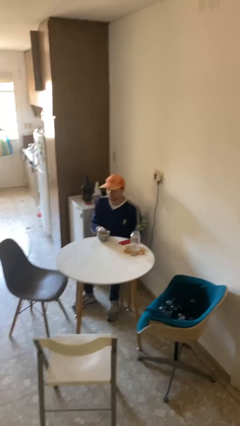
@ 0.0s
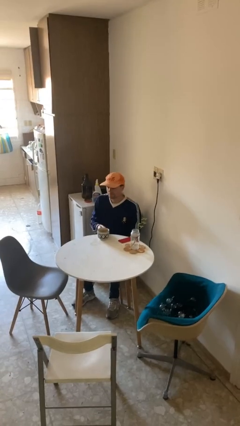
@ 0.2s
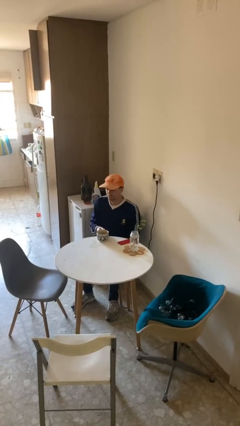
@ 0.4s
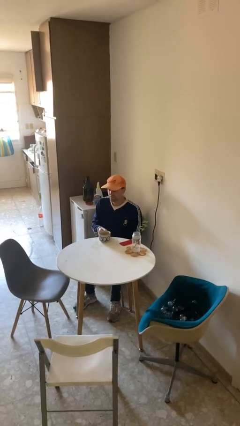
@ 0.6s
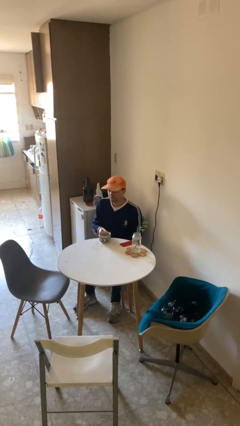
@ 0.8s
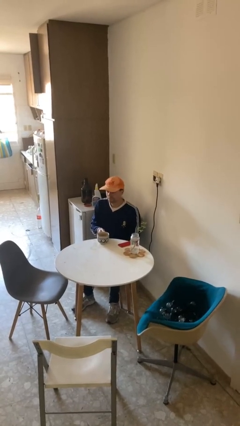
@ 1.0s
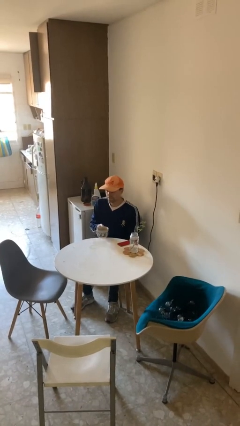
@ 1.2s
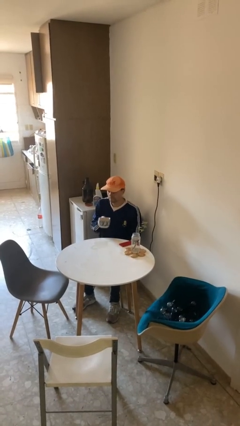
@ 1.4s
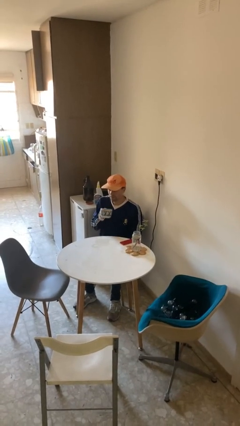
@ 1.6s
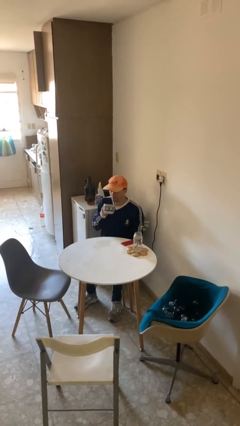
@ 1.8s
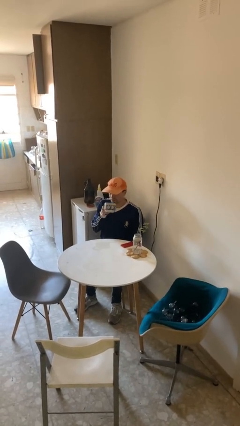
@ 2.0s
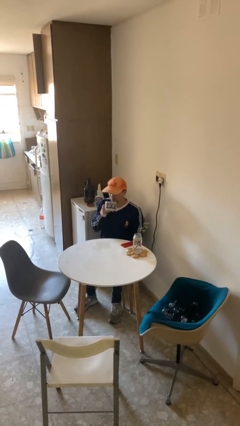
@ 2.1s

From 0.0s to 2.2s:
person picks up object from table

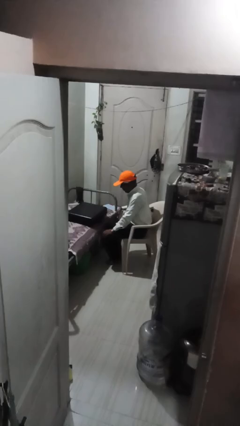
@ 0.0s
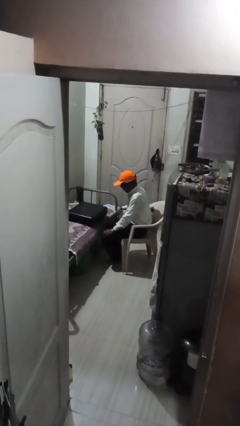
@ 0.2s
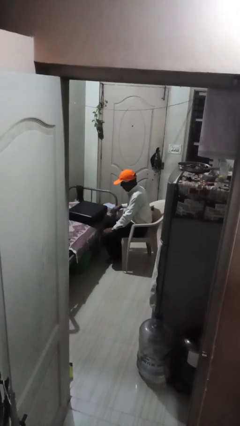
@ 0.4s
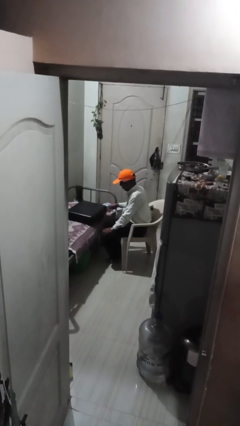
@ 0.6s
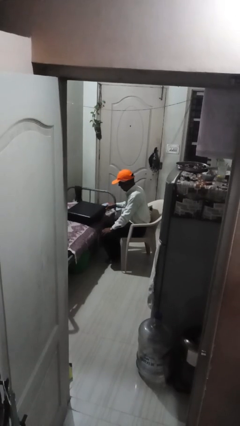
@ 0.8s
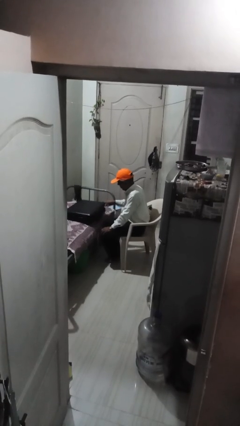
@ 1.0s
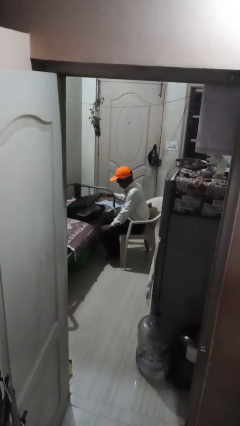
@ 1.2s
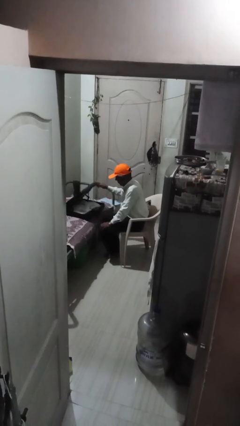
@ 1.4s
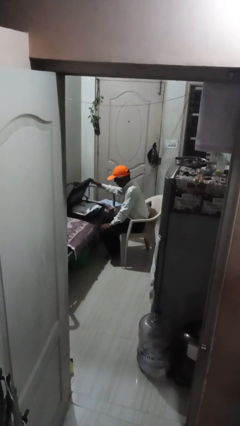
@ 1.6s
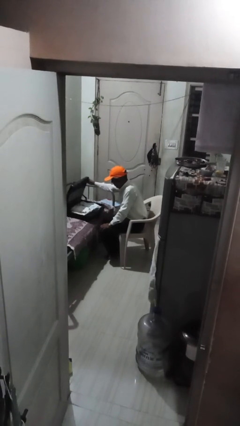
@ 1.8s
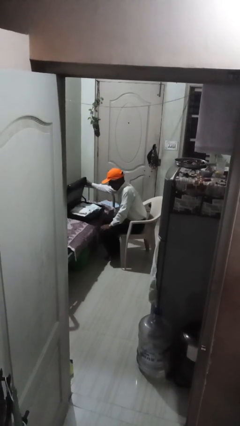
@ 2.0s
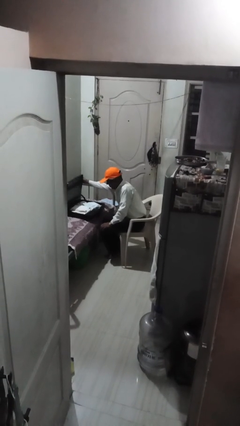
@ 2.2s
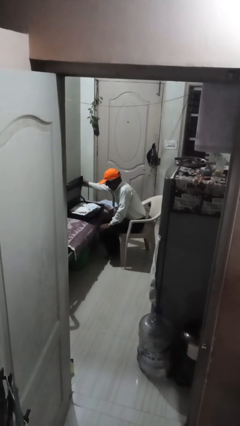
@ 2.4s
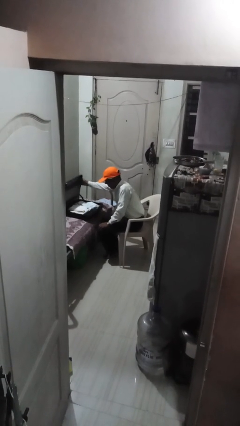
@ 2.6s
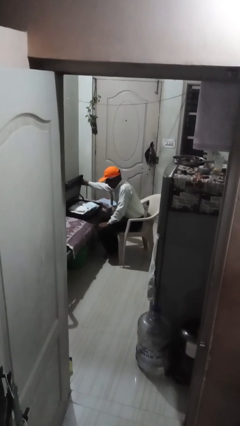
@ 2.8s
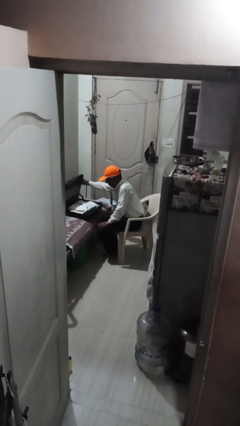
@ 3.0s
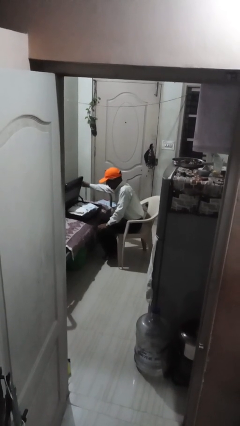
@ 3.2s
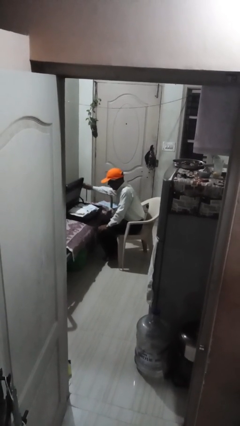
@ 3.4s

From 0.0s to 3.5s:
person opens suitcase

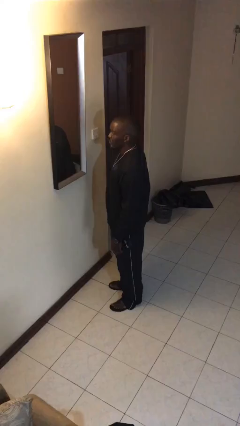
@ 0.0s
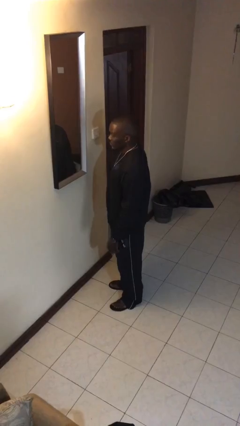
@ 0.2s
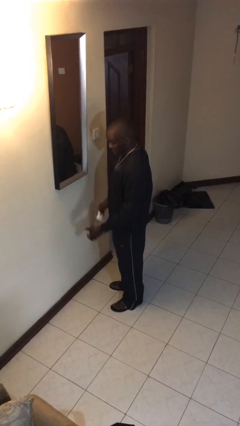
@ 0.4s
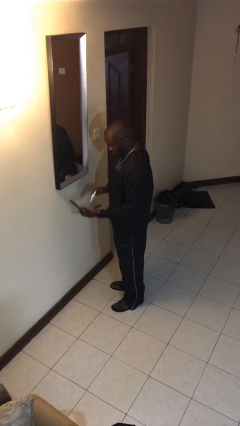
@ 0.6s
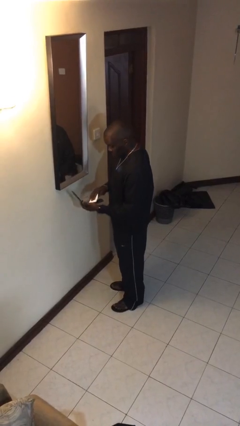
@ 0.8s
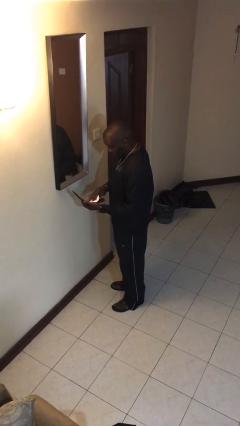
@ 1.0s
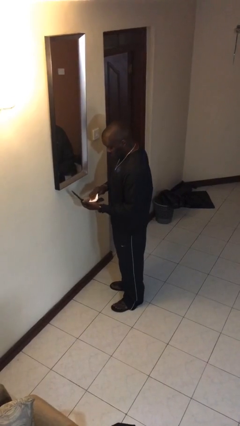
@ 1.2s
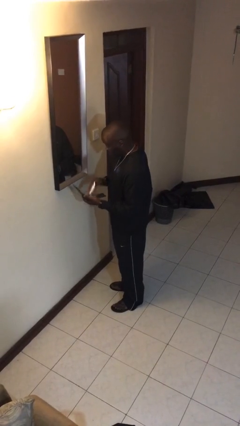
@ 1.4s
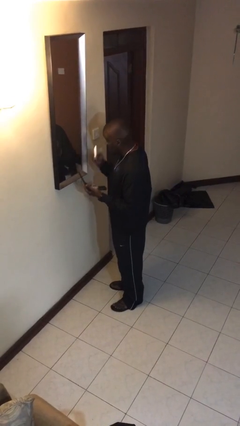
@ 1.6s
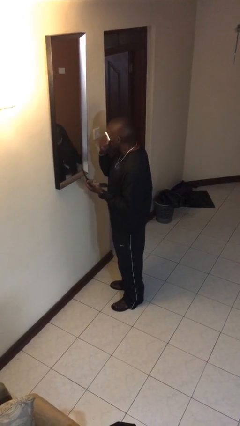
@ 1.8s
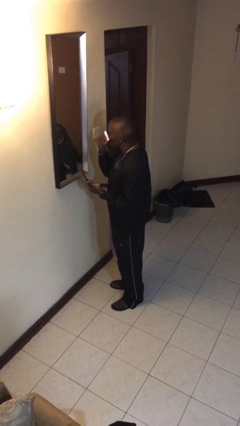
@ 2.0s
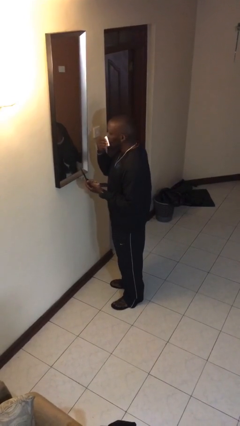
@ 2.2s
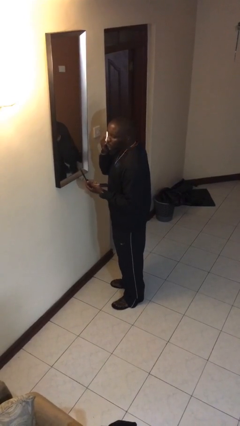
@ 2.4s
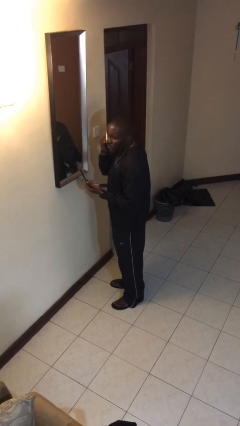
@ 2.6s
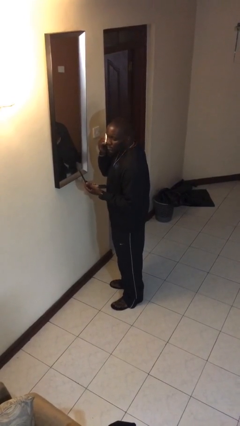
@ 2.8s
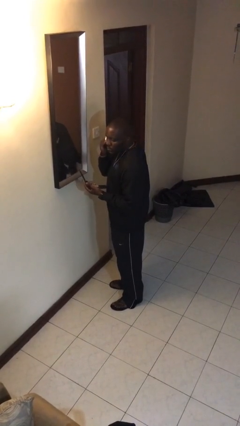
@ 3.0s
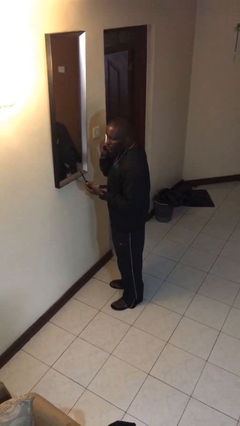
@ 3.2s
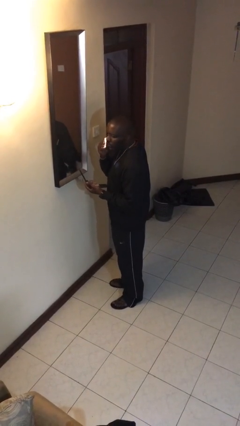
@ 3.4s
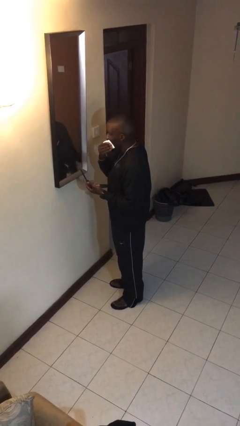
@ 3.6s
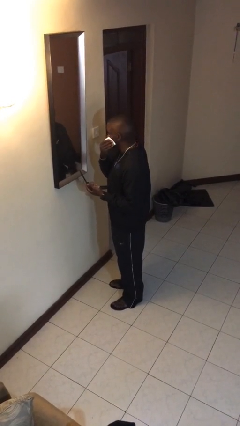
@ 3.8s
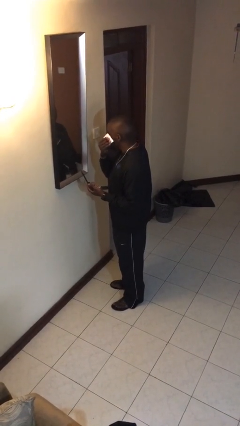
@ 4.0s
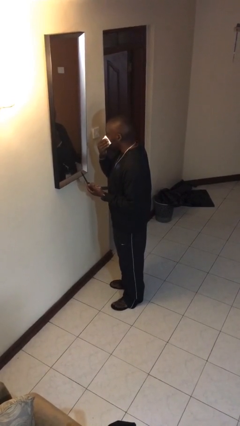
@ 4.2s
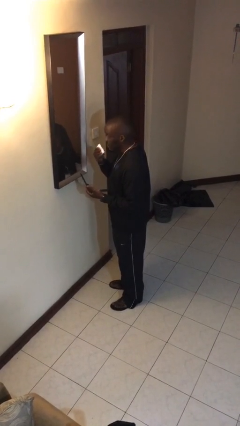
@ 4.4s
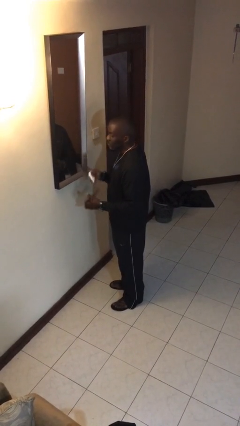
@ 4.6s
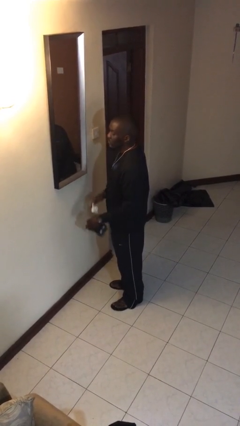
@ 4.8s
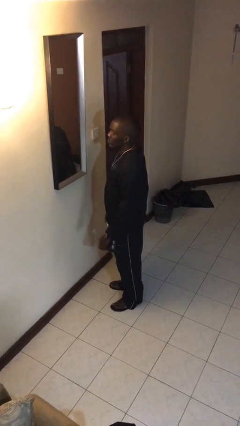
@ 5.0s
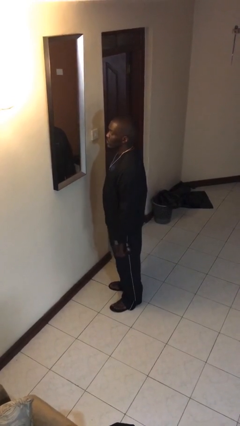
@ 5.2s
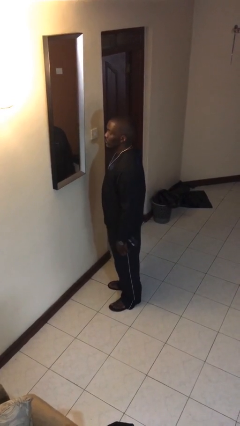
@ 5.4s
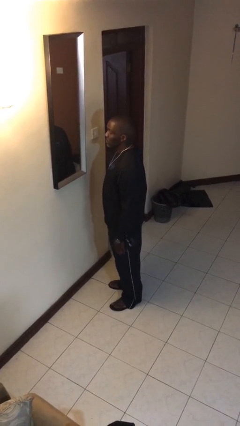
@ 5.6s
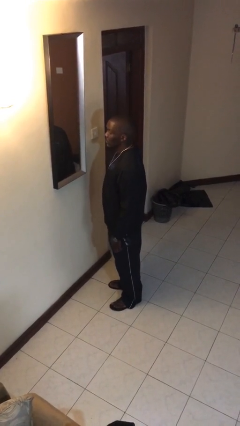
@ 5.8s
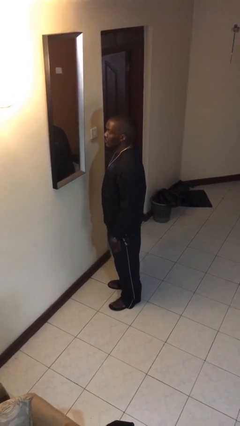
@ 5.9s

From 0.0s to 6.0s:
person applies foundation makeup

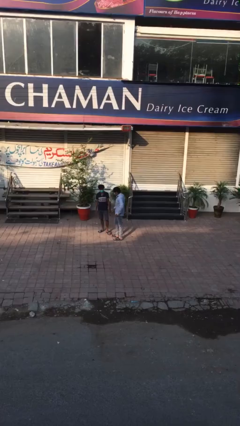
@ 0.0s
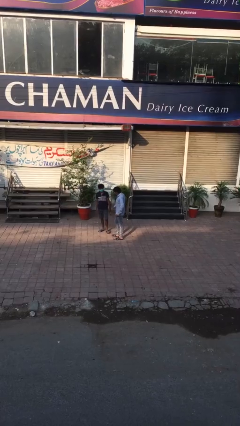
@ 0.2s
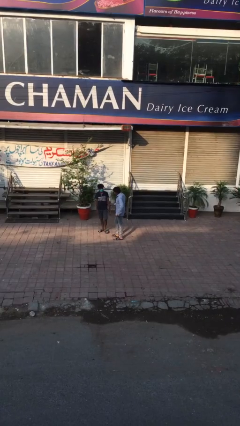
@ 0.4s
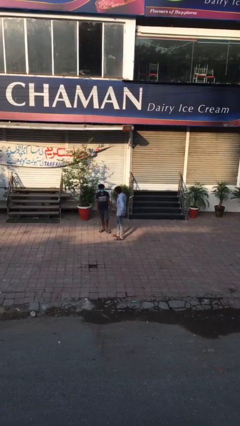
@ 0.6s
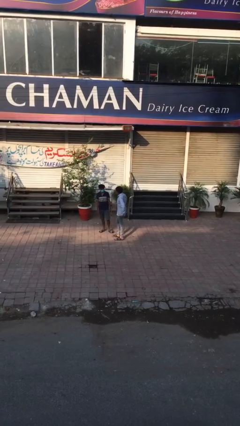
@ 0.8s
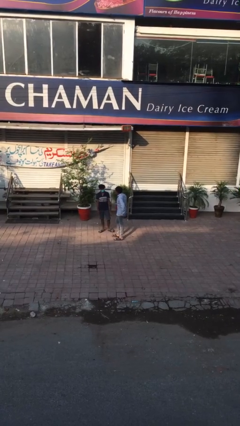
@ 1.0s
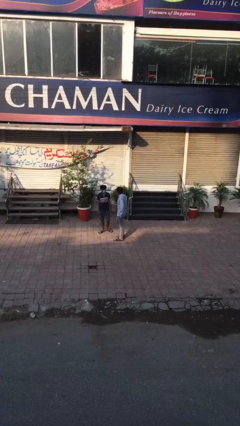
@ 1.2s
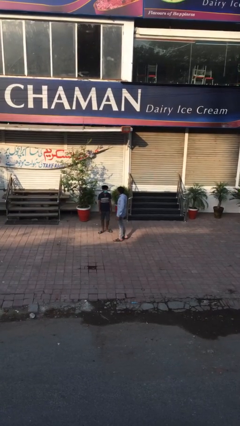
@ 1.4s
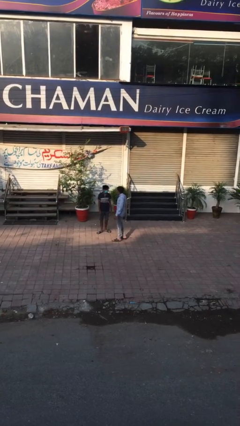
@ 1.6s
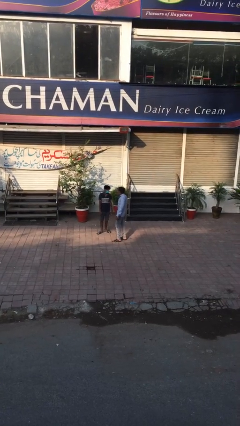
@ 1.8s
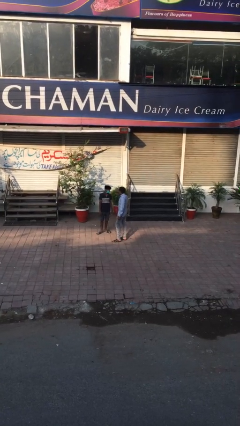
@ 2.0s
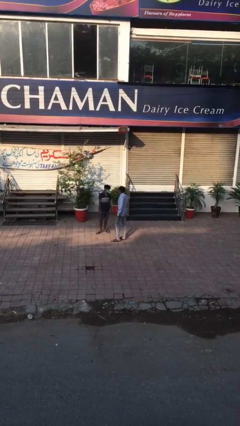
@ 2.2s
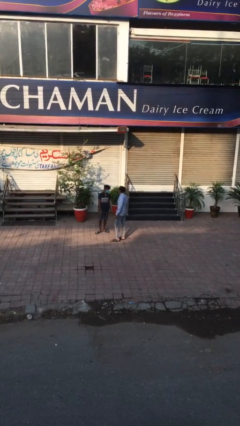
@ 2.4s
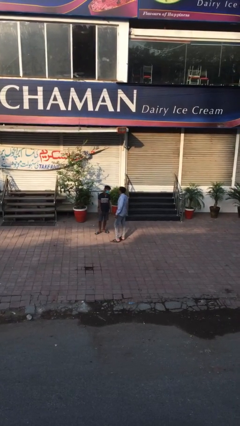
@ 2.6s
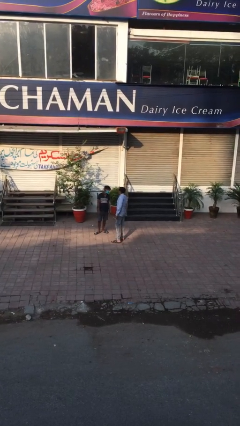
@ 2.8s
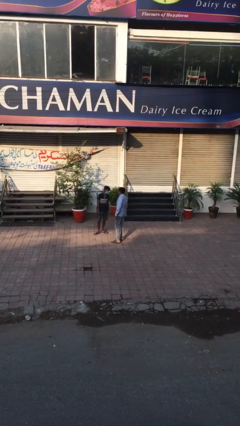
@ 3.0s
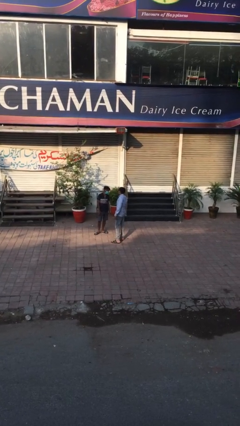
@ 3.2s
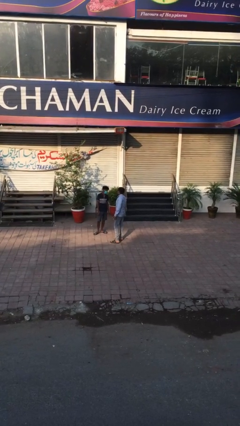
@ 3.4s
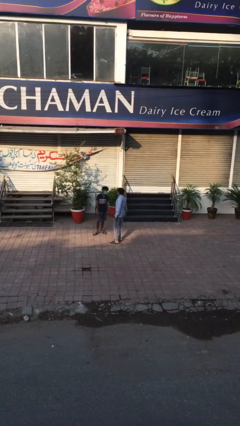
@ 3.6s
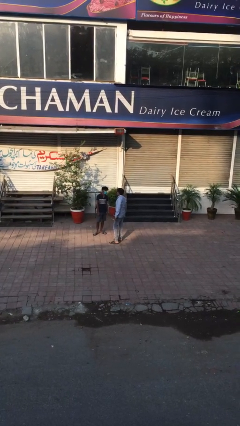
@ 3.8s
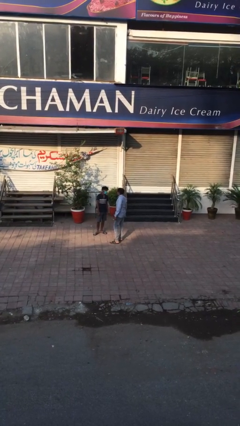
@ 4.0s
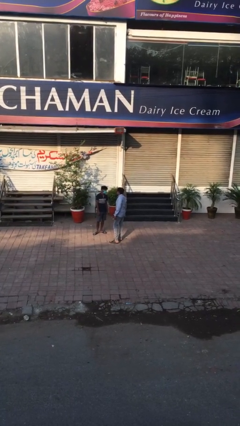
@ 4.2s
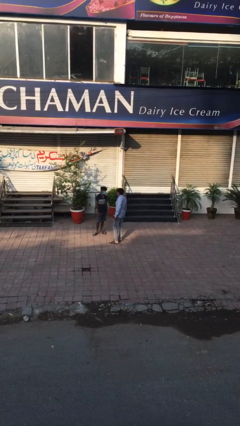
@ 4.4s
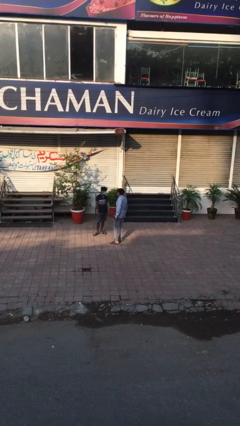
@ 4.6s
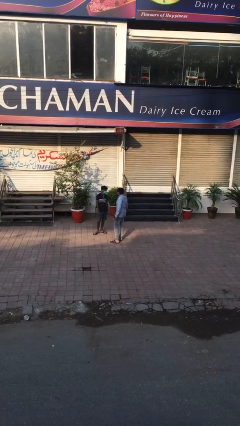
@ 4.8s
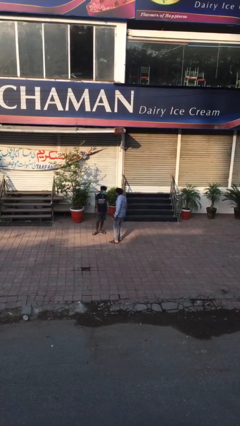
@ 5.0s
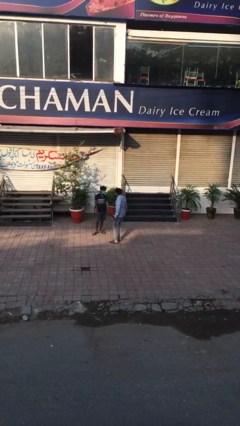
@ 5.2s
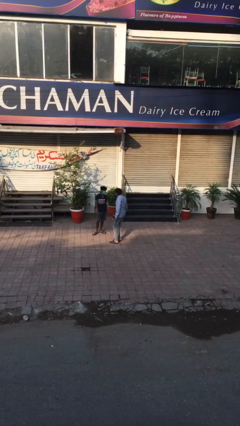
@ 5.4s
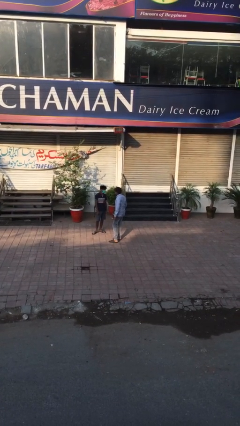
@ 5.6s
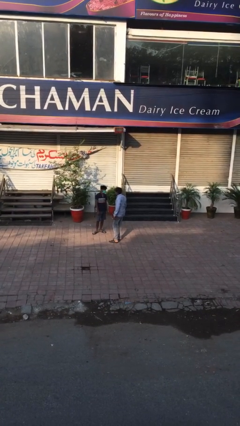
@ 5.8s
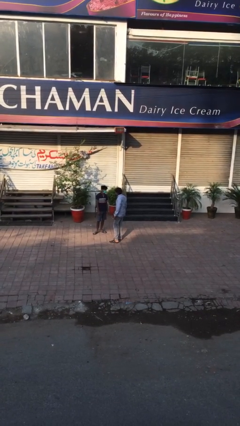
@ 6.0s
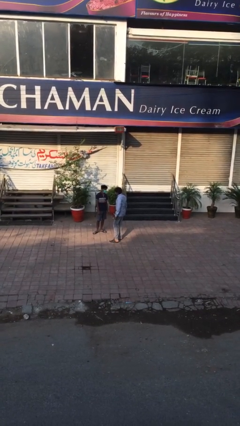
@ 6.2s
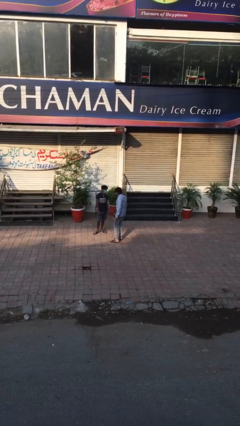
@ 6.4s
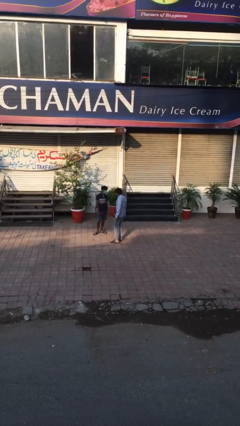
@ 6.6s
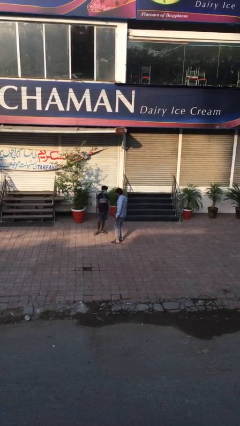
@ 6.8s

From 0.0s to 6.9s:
person talks to person
